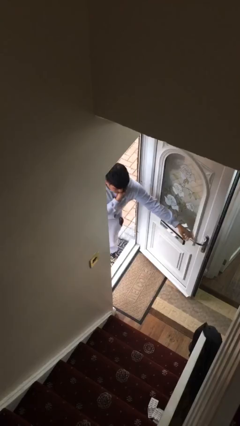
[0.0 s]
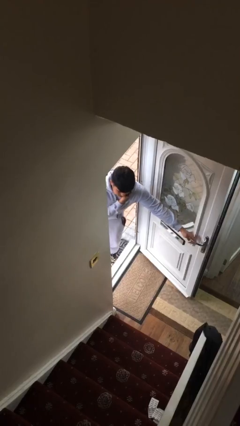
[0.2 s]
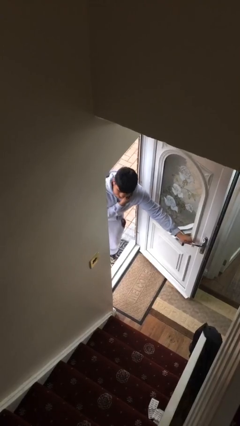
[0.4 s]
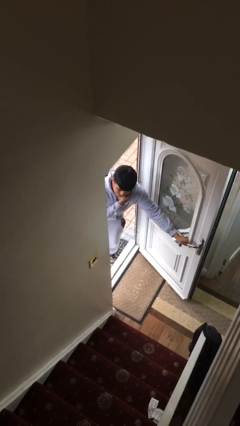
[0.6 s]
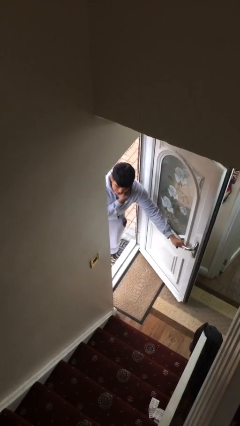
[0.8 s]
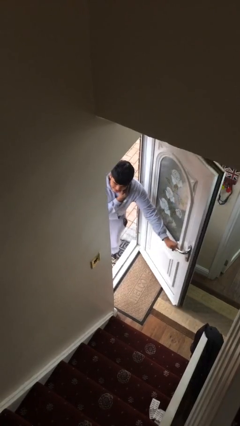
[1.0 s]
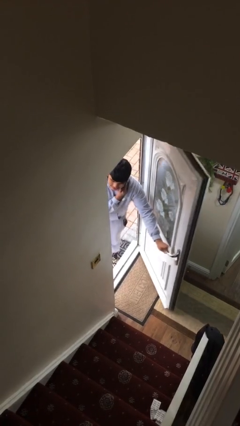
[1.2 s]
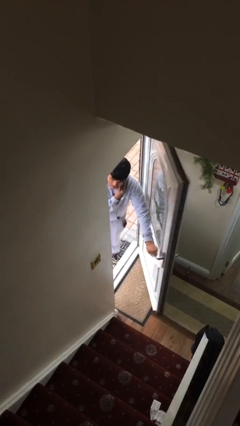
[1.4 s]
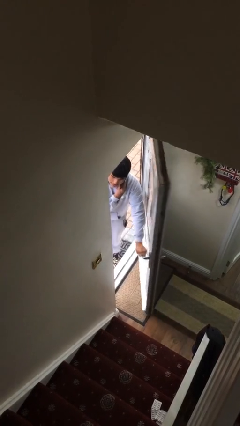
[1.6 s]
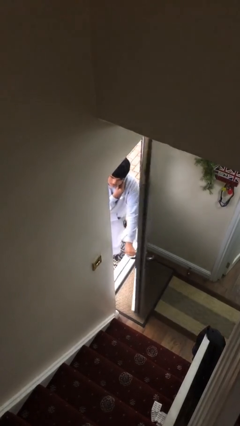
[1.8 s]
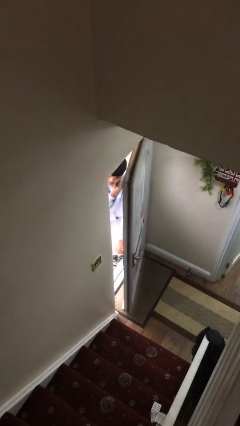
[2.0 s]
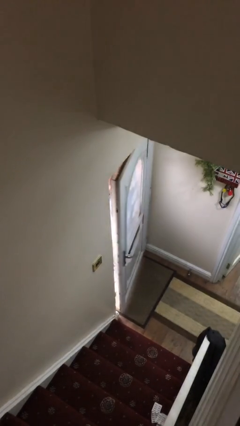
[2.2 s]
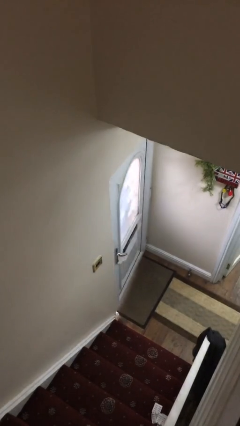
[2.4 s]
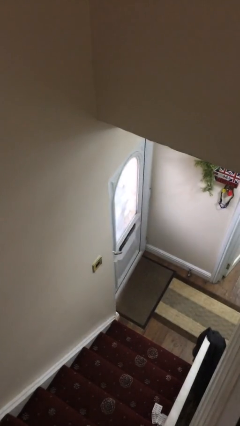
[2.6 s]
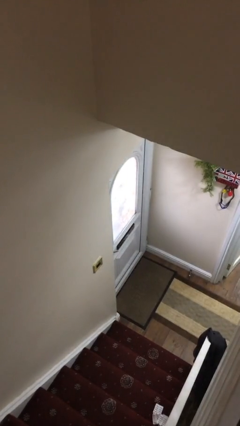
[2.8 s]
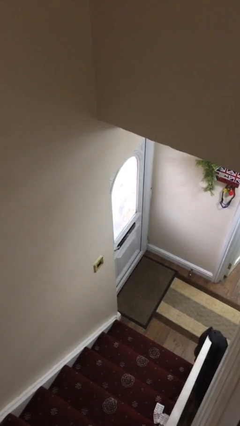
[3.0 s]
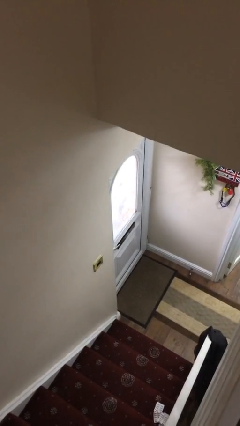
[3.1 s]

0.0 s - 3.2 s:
person closes facility door

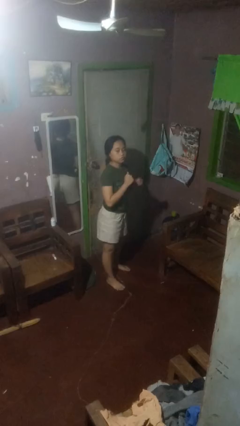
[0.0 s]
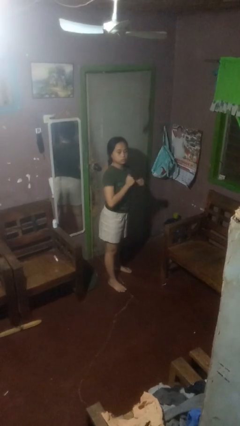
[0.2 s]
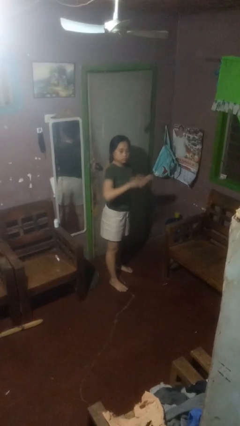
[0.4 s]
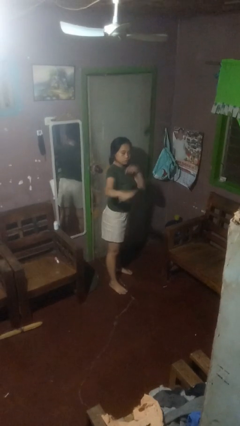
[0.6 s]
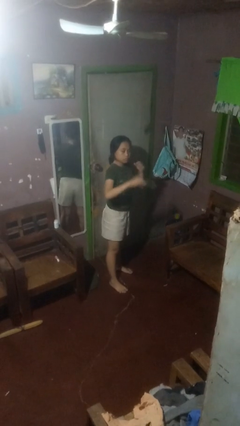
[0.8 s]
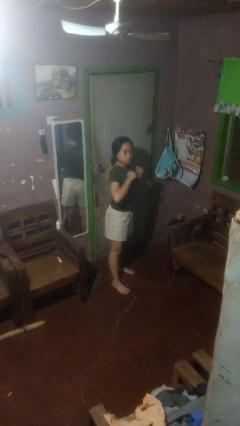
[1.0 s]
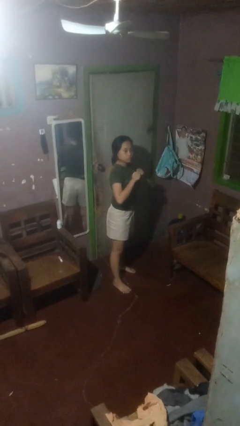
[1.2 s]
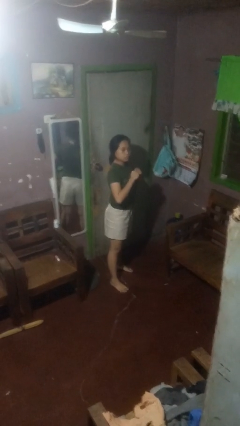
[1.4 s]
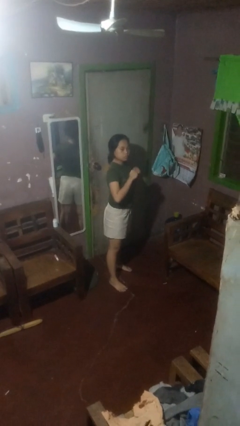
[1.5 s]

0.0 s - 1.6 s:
person karate chop

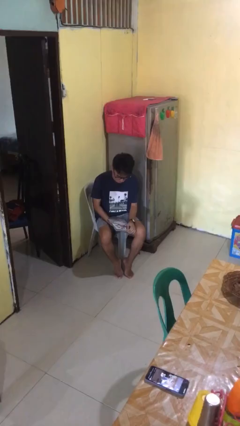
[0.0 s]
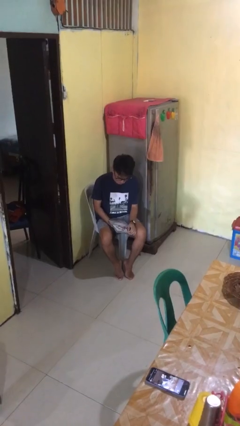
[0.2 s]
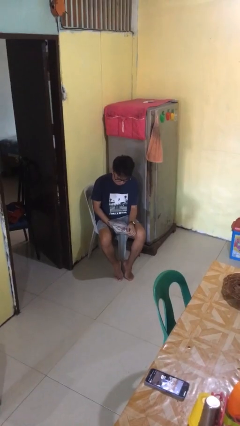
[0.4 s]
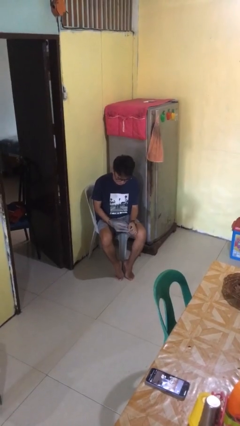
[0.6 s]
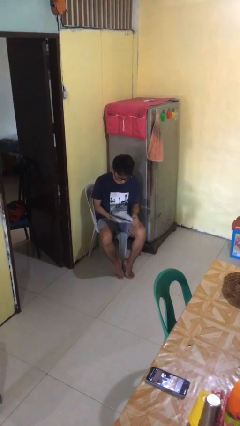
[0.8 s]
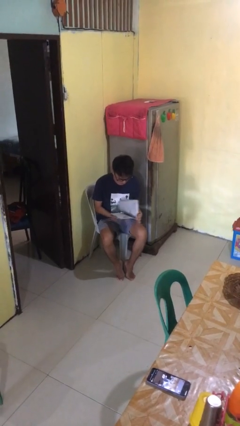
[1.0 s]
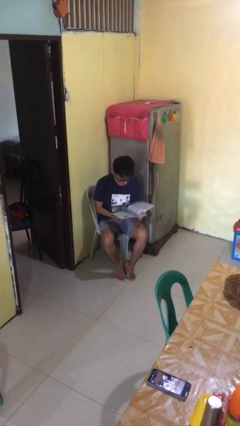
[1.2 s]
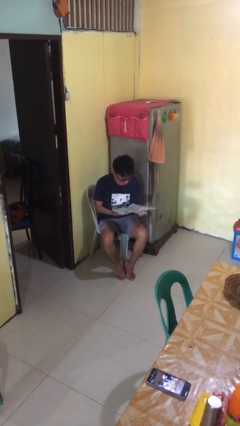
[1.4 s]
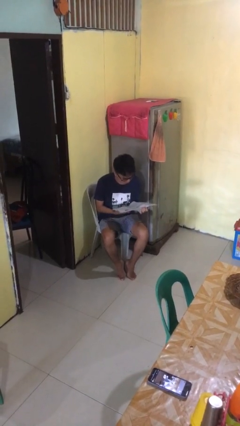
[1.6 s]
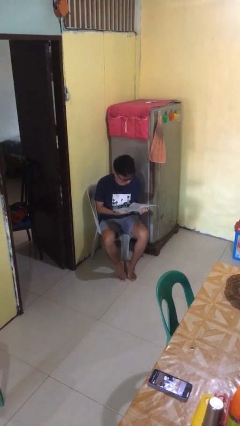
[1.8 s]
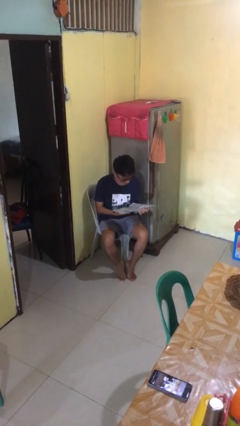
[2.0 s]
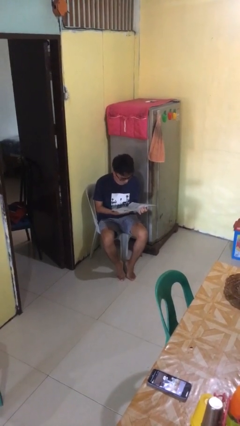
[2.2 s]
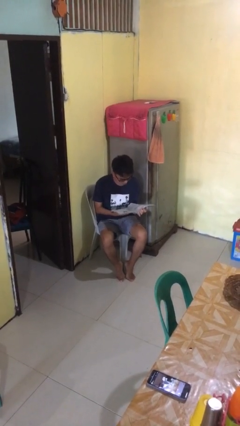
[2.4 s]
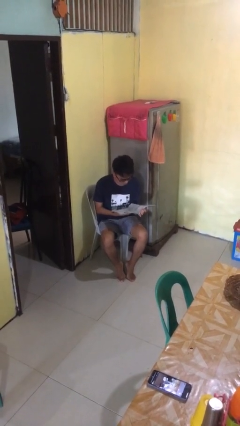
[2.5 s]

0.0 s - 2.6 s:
person reads book

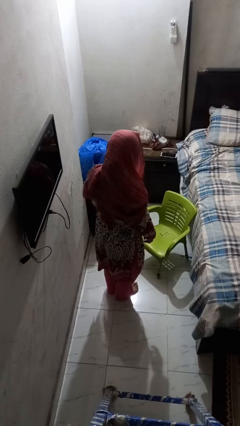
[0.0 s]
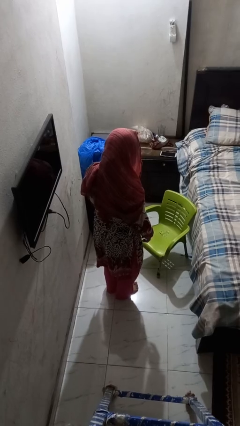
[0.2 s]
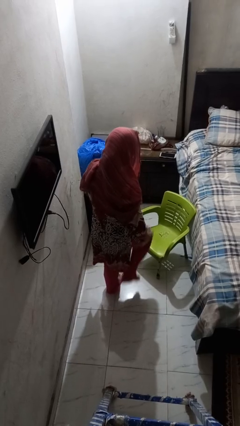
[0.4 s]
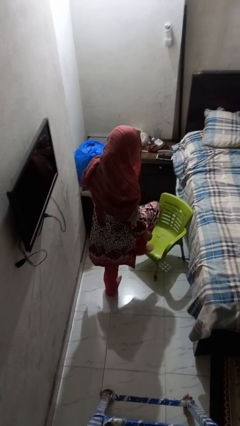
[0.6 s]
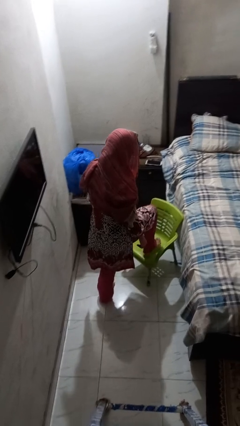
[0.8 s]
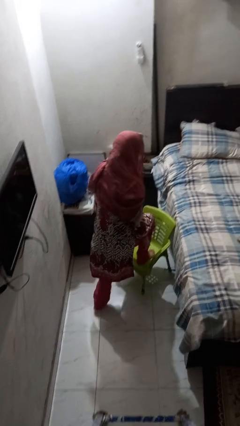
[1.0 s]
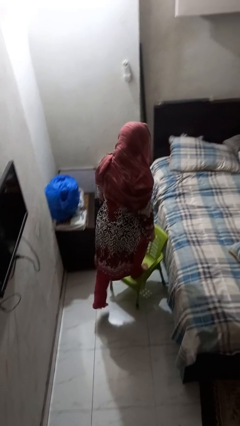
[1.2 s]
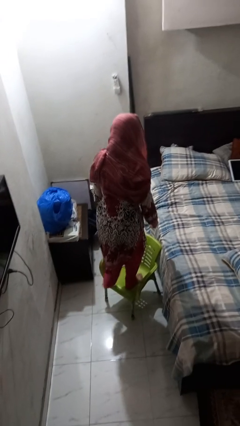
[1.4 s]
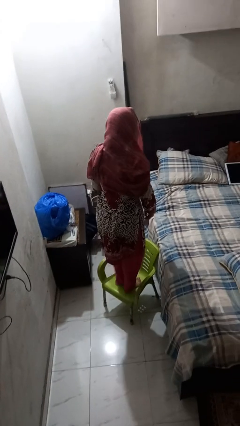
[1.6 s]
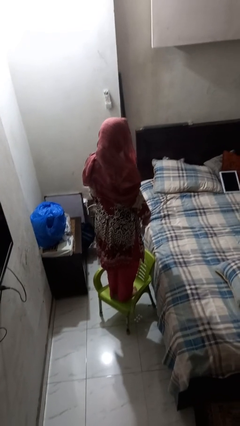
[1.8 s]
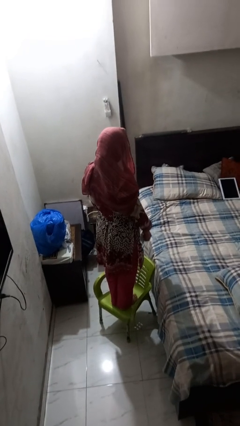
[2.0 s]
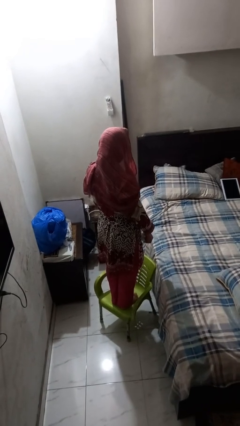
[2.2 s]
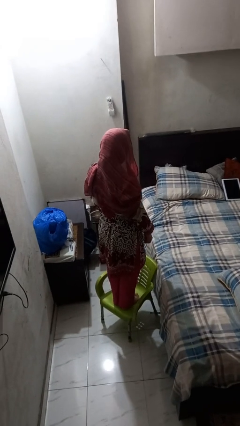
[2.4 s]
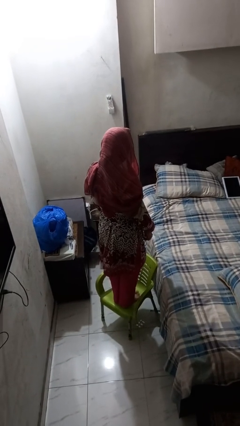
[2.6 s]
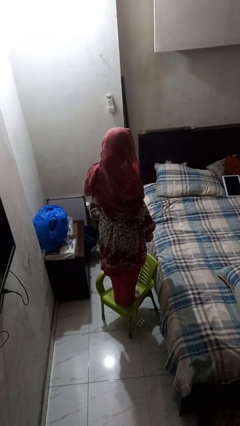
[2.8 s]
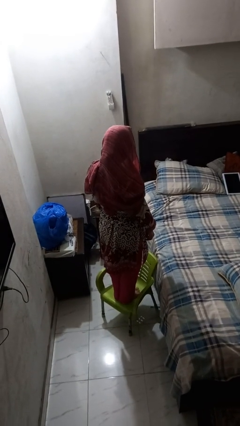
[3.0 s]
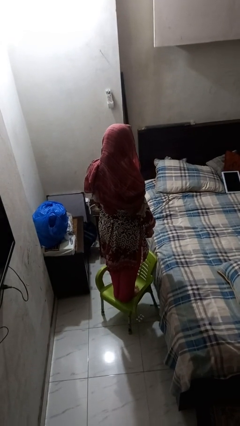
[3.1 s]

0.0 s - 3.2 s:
person climbs on chair

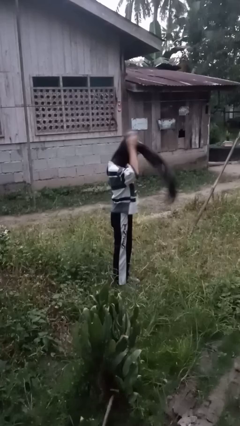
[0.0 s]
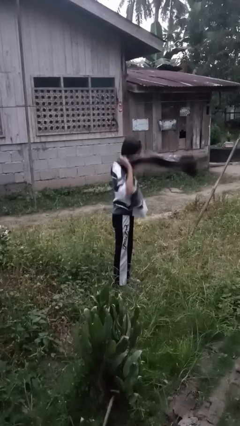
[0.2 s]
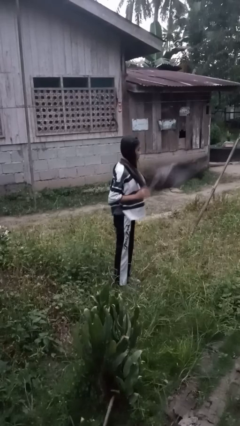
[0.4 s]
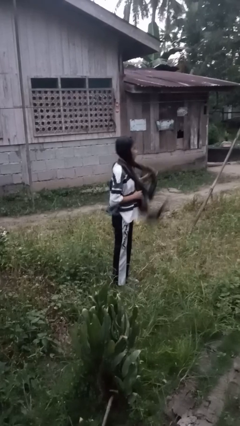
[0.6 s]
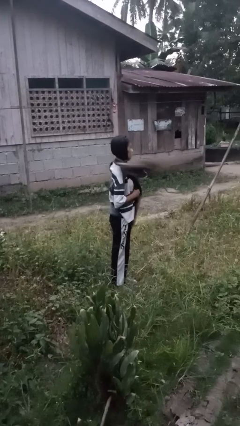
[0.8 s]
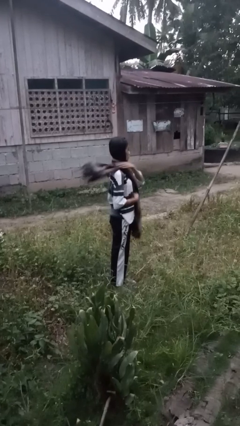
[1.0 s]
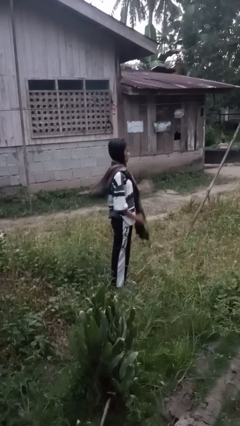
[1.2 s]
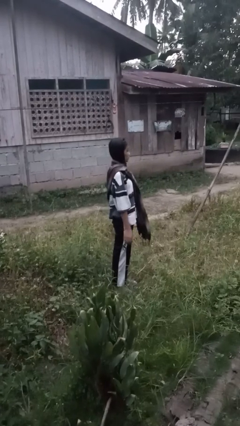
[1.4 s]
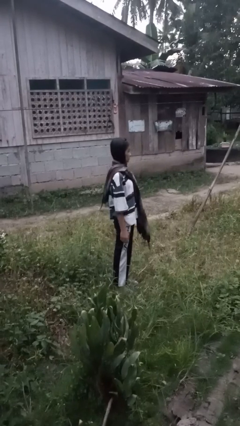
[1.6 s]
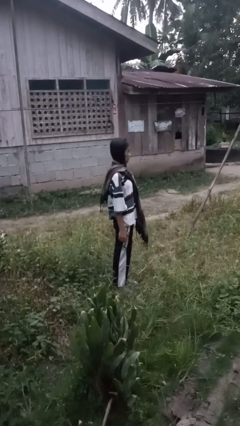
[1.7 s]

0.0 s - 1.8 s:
person puts on scarf

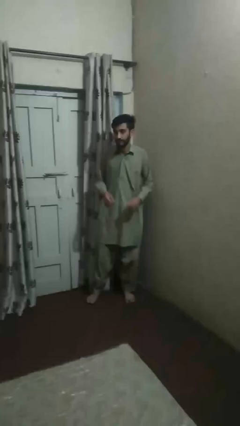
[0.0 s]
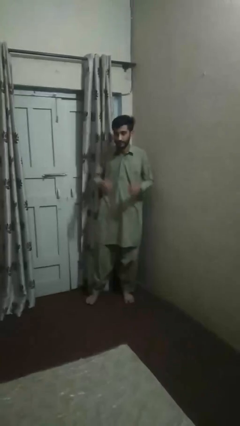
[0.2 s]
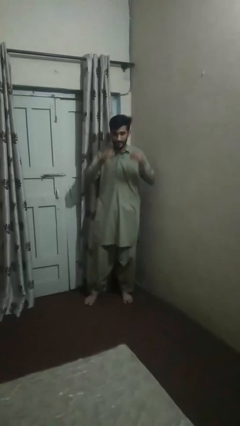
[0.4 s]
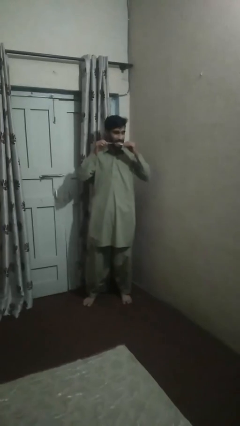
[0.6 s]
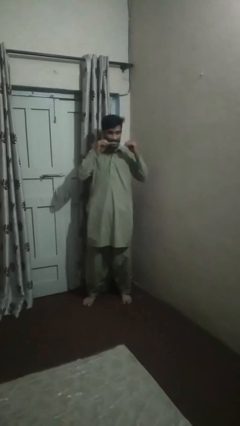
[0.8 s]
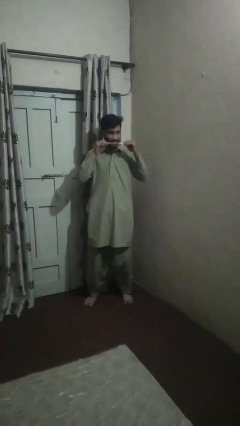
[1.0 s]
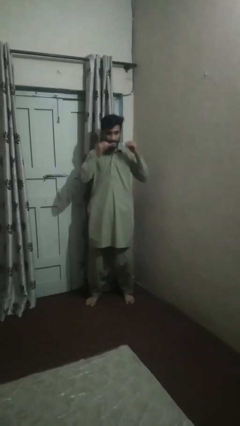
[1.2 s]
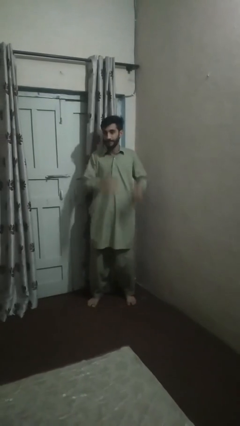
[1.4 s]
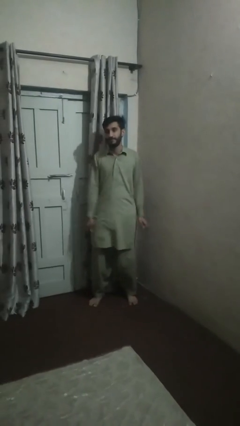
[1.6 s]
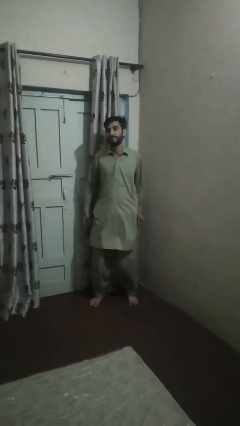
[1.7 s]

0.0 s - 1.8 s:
person flosses

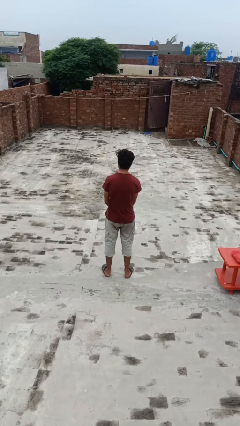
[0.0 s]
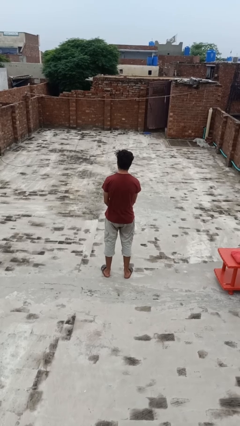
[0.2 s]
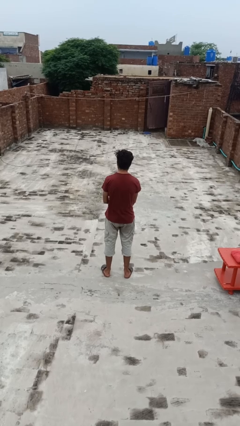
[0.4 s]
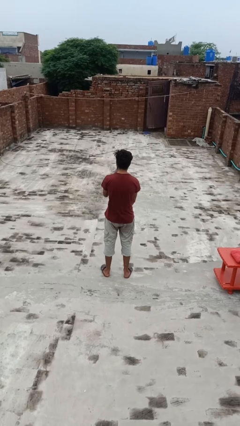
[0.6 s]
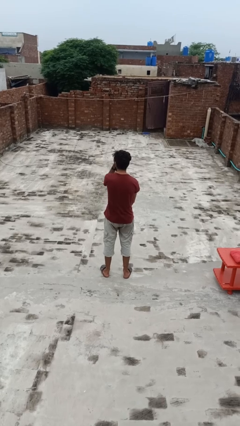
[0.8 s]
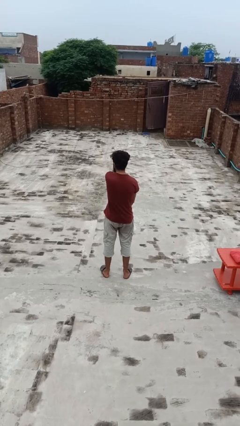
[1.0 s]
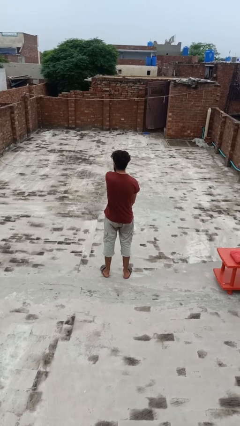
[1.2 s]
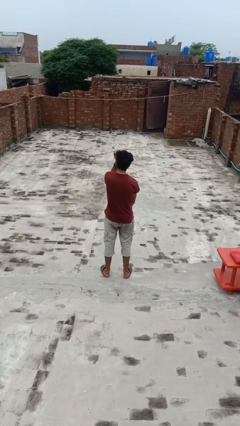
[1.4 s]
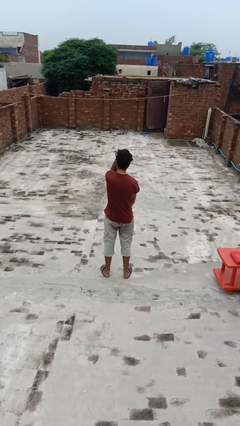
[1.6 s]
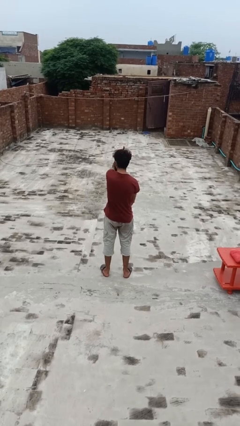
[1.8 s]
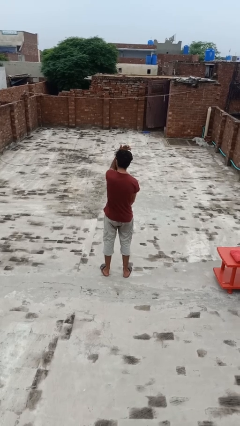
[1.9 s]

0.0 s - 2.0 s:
person strokes hair

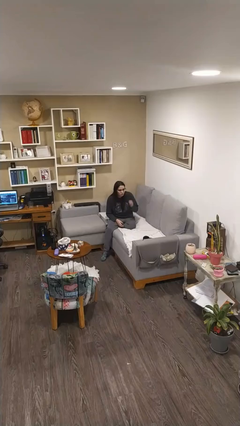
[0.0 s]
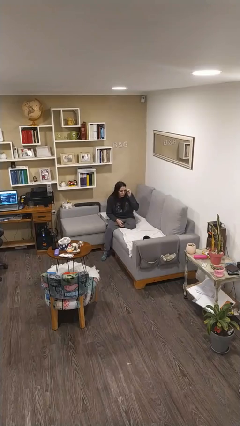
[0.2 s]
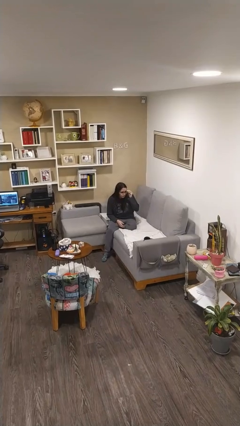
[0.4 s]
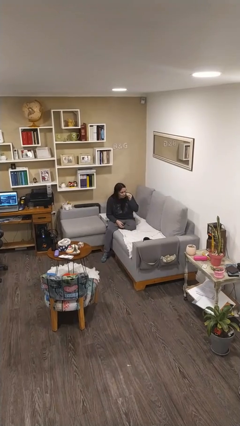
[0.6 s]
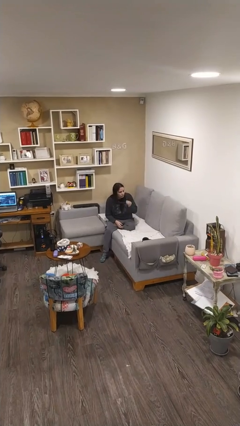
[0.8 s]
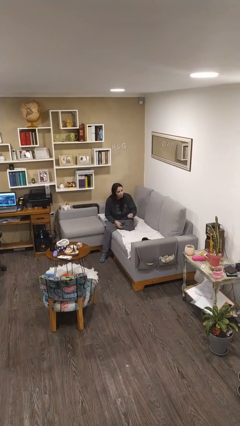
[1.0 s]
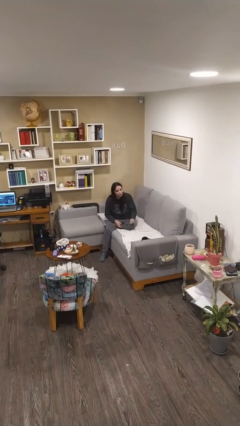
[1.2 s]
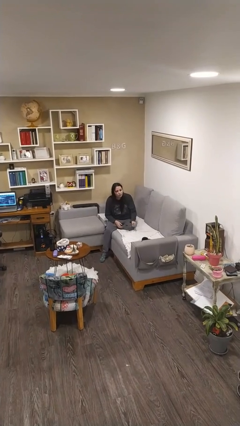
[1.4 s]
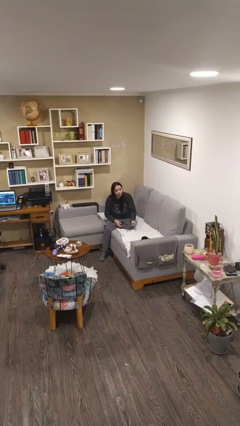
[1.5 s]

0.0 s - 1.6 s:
person takes off glasses
